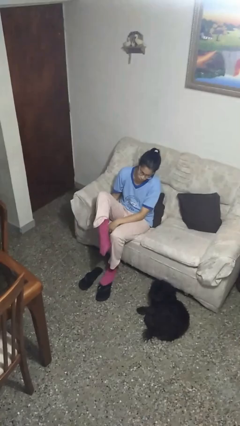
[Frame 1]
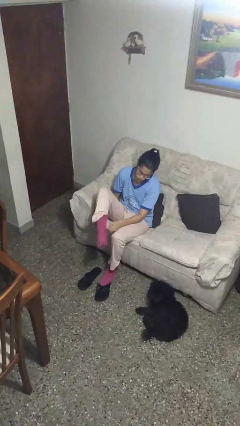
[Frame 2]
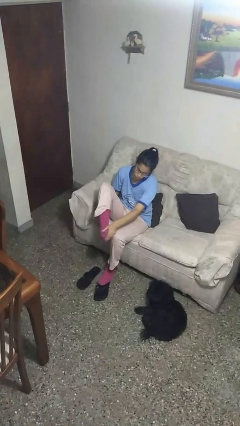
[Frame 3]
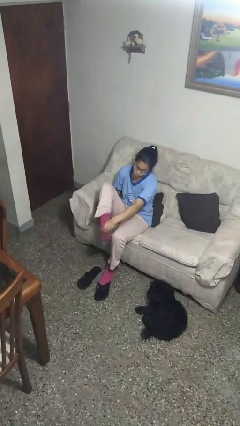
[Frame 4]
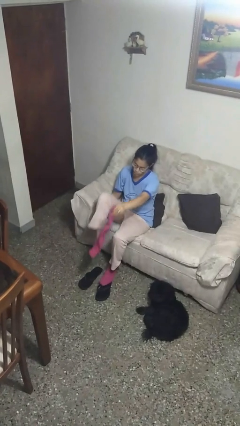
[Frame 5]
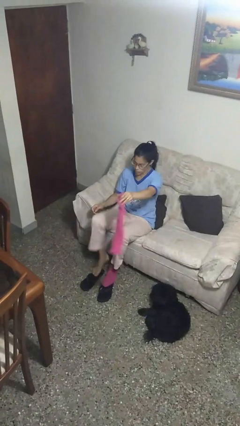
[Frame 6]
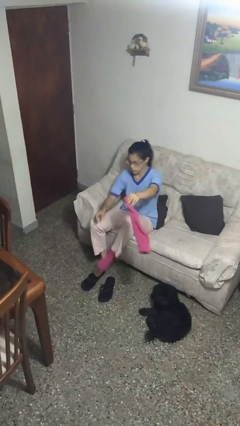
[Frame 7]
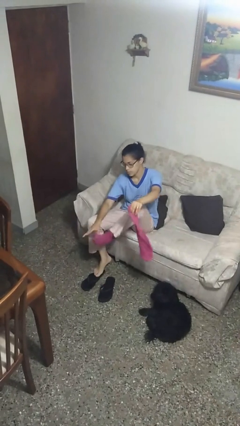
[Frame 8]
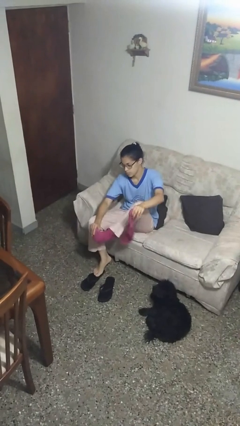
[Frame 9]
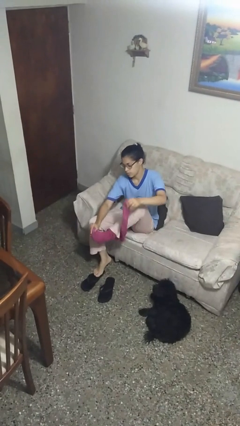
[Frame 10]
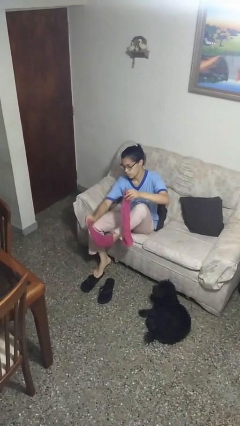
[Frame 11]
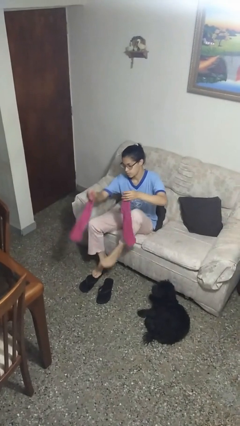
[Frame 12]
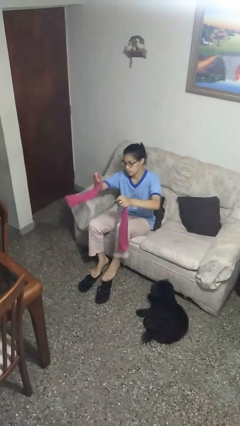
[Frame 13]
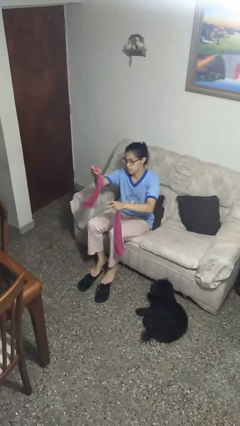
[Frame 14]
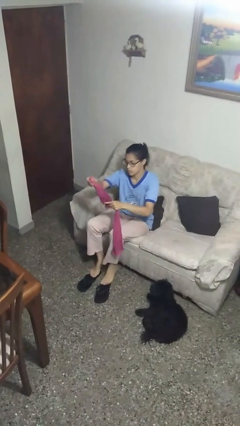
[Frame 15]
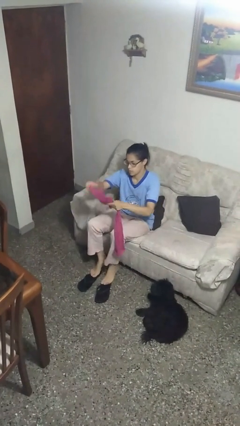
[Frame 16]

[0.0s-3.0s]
person takes off socks

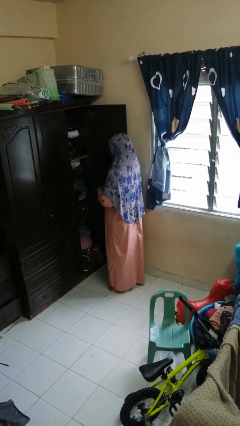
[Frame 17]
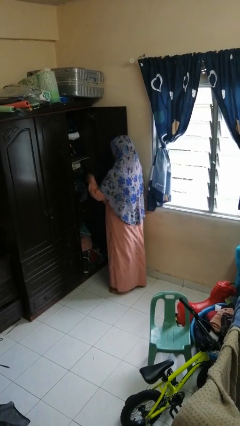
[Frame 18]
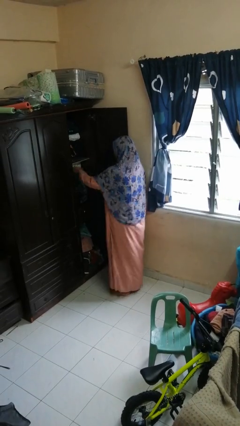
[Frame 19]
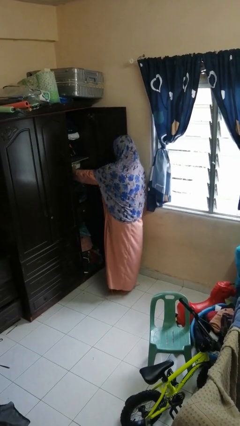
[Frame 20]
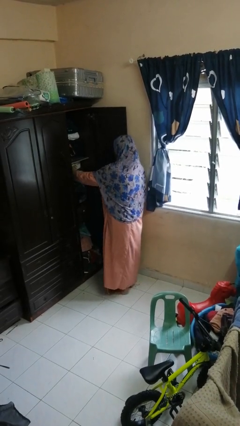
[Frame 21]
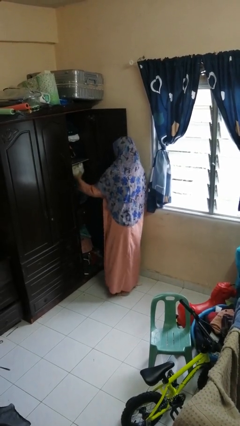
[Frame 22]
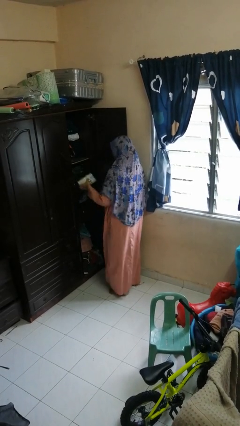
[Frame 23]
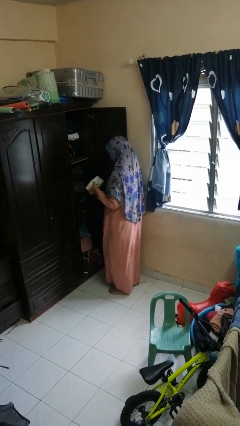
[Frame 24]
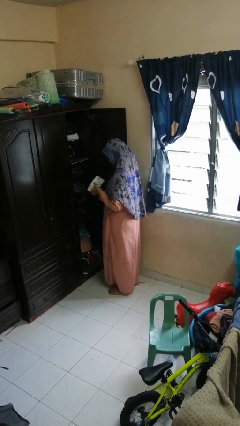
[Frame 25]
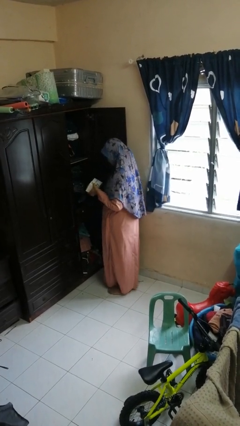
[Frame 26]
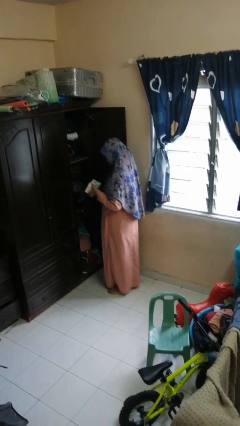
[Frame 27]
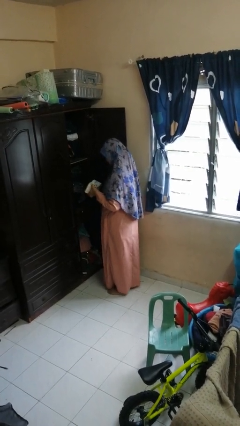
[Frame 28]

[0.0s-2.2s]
person picks up object from cabinet

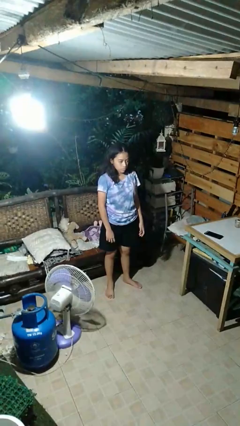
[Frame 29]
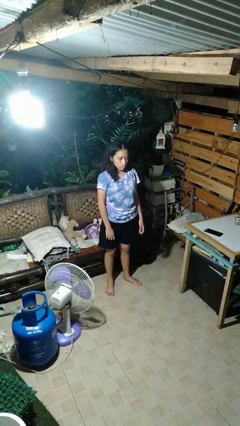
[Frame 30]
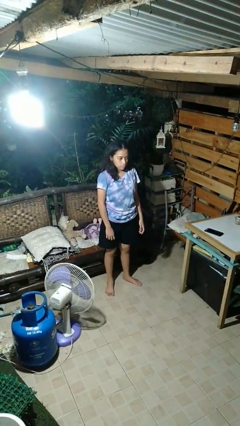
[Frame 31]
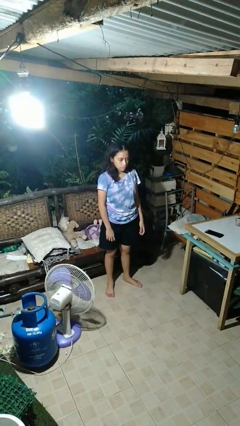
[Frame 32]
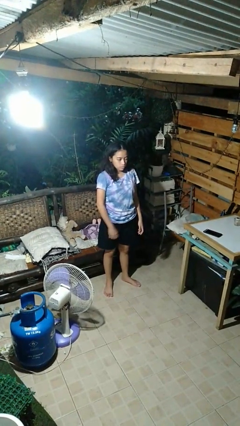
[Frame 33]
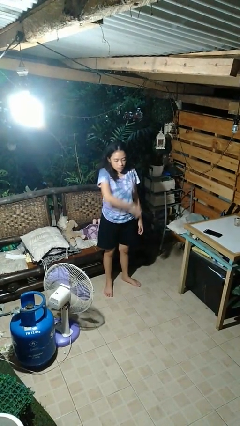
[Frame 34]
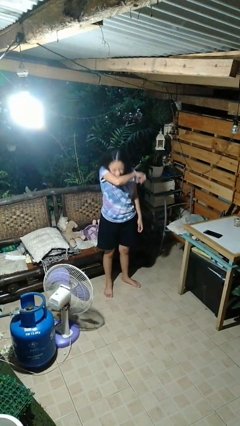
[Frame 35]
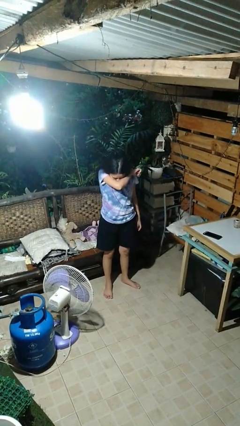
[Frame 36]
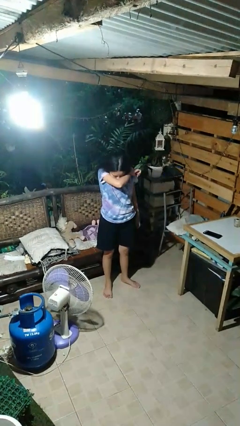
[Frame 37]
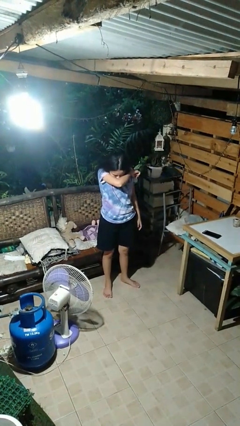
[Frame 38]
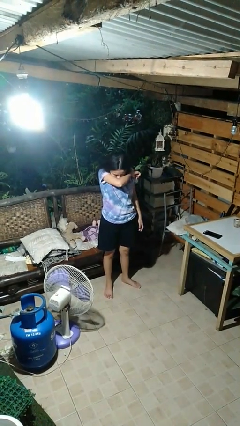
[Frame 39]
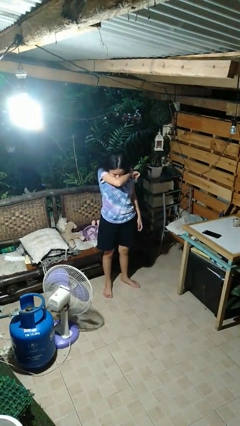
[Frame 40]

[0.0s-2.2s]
person sneezes into arm

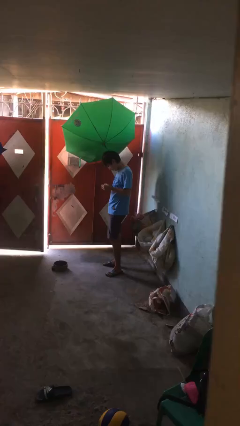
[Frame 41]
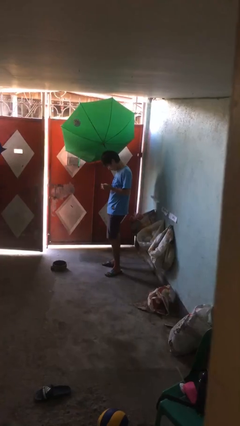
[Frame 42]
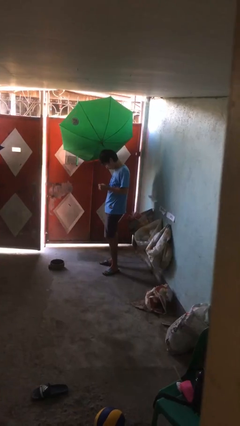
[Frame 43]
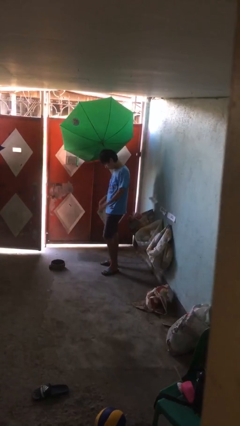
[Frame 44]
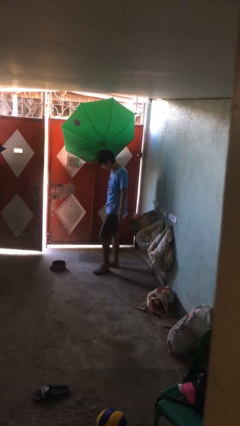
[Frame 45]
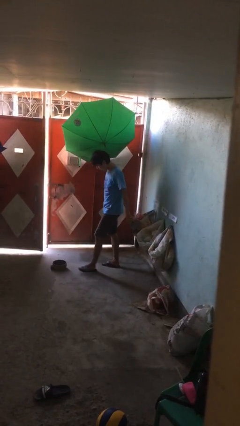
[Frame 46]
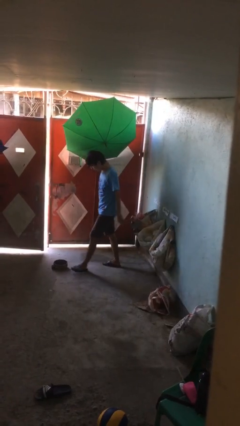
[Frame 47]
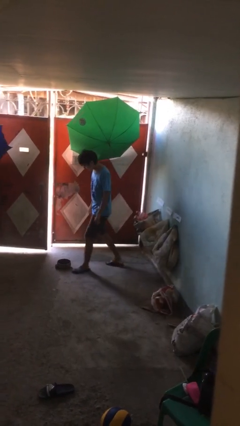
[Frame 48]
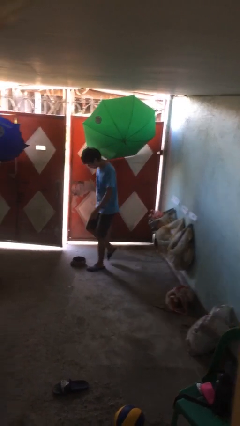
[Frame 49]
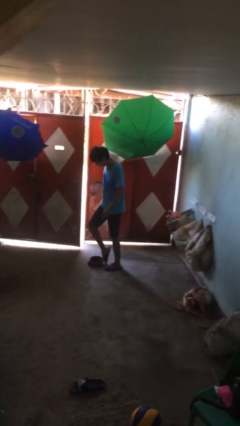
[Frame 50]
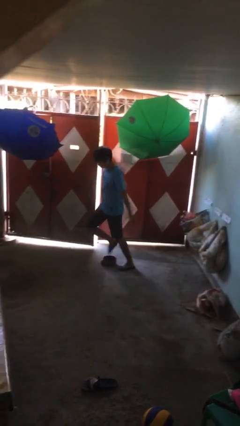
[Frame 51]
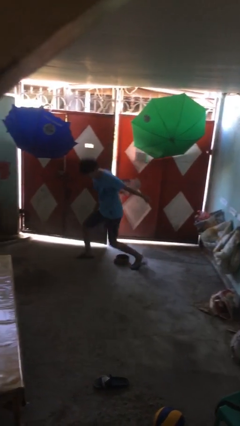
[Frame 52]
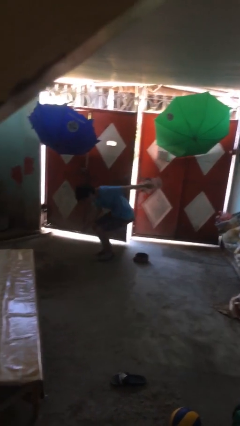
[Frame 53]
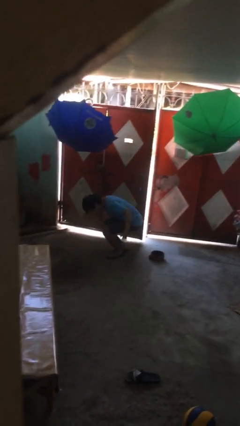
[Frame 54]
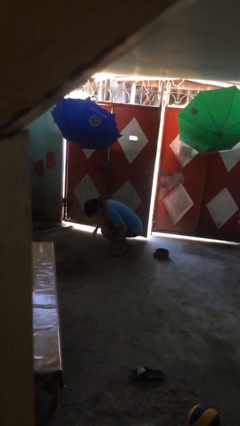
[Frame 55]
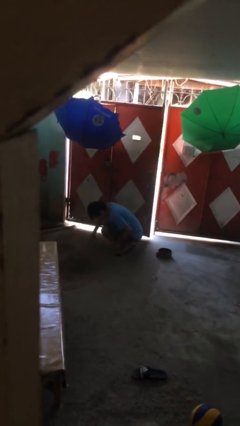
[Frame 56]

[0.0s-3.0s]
person trips on object on floor

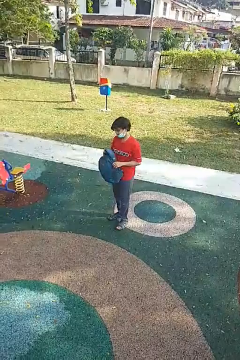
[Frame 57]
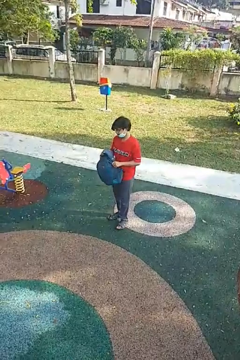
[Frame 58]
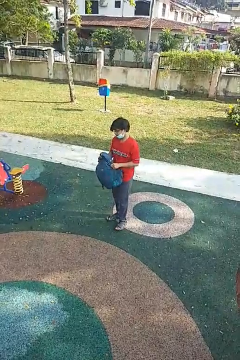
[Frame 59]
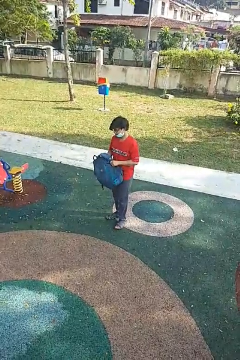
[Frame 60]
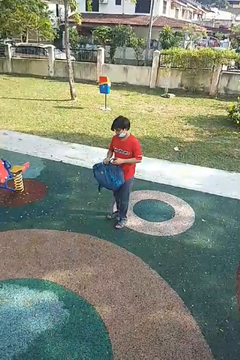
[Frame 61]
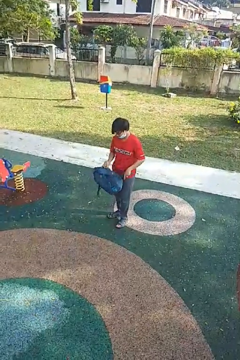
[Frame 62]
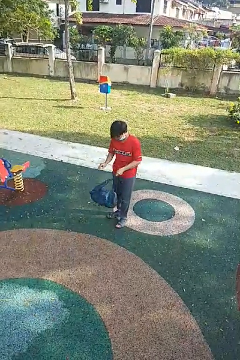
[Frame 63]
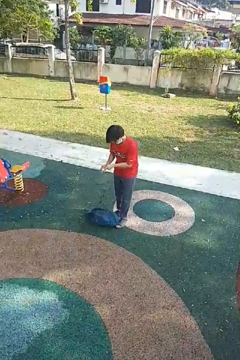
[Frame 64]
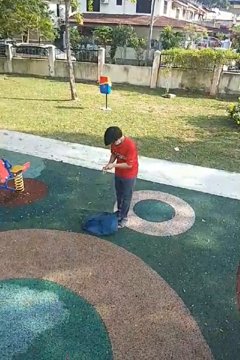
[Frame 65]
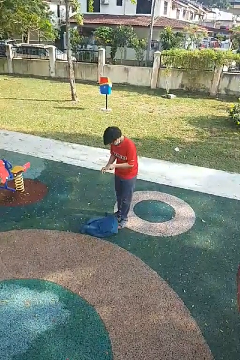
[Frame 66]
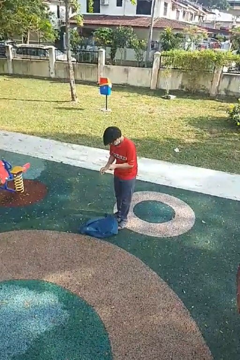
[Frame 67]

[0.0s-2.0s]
person drops object

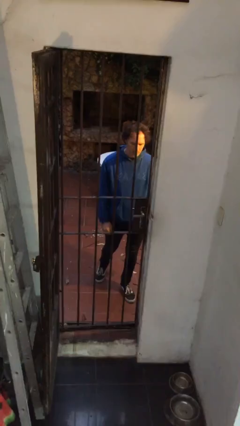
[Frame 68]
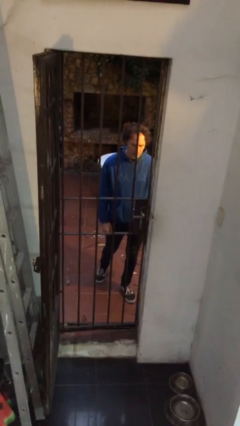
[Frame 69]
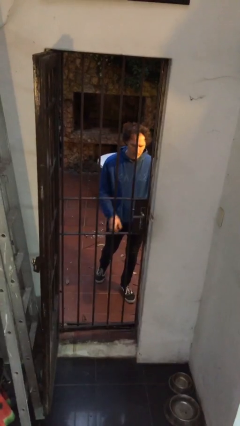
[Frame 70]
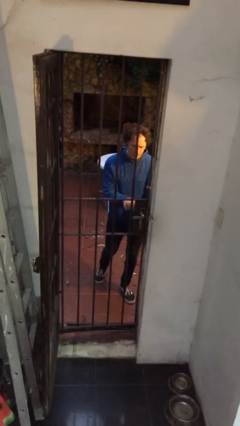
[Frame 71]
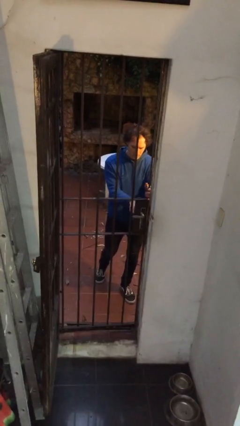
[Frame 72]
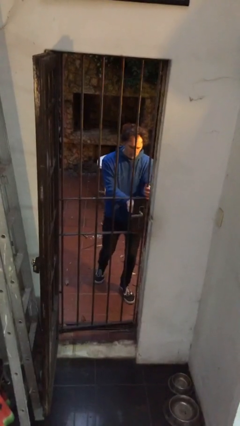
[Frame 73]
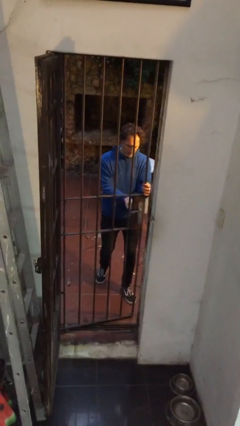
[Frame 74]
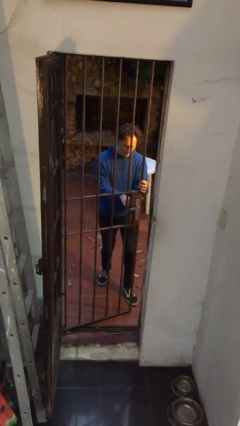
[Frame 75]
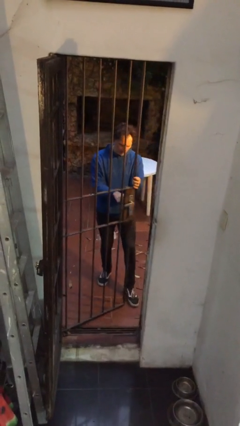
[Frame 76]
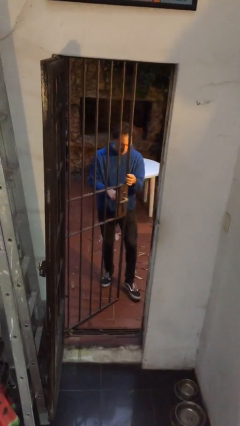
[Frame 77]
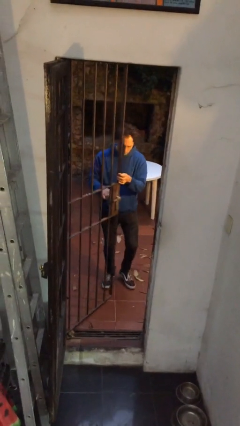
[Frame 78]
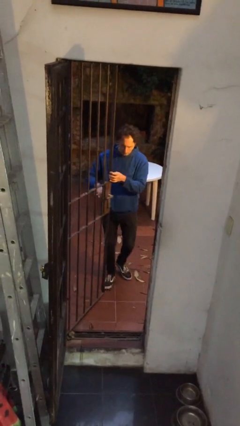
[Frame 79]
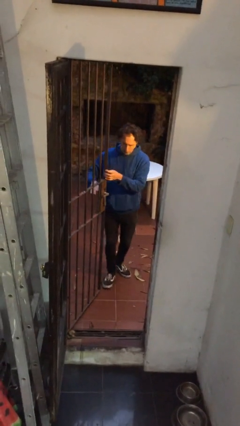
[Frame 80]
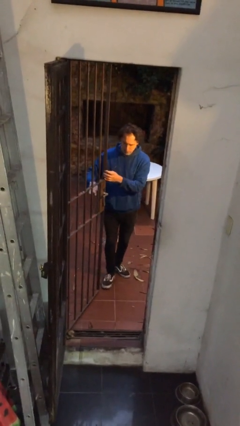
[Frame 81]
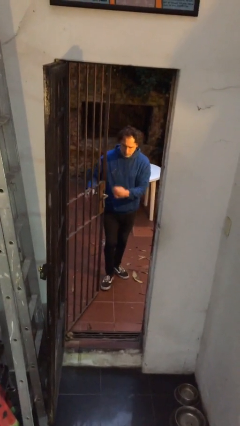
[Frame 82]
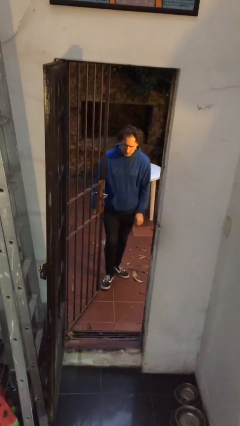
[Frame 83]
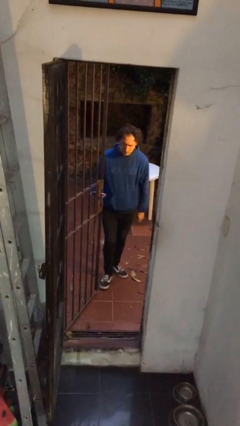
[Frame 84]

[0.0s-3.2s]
person opens gate

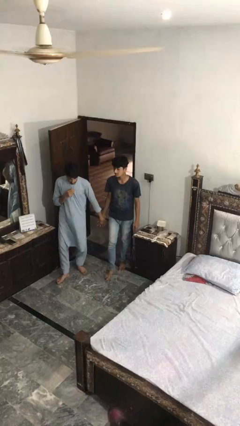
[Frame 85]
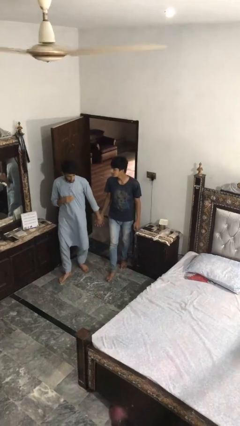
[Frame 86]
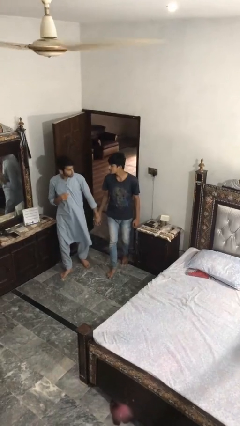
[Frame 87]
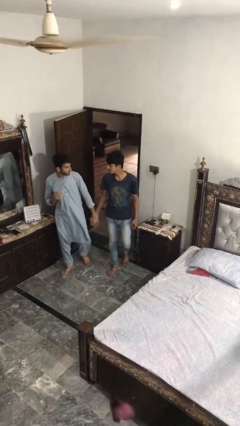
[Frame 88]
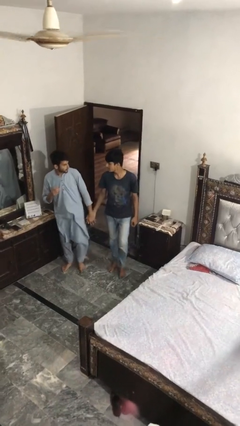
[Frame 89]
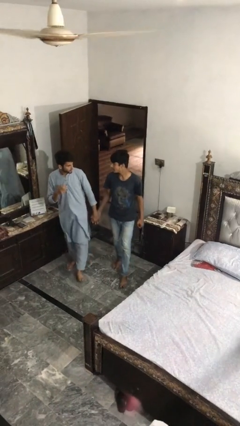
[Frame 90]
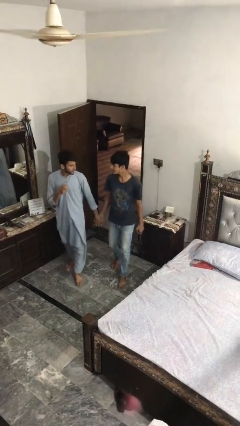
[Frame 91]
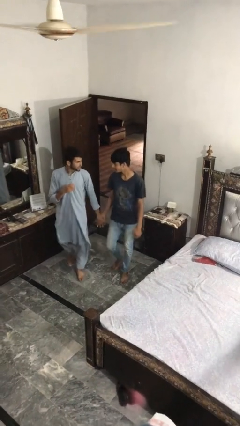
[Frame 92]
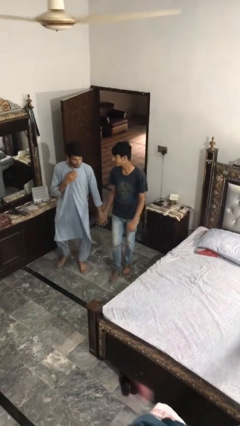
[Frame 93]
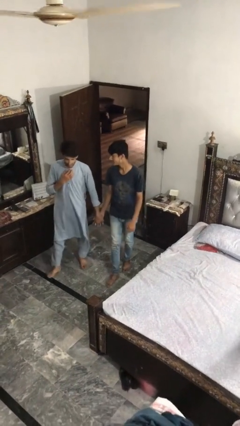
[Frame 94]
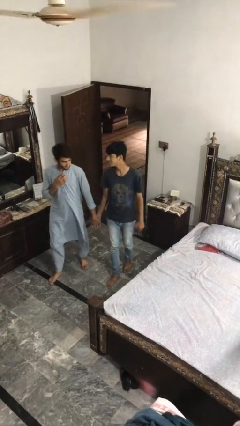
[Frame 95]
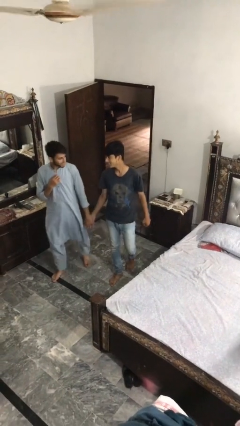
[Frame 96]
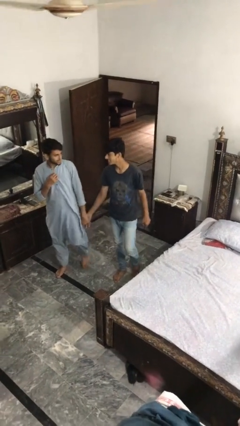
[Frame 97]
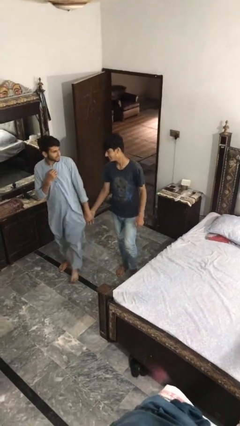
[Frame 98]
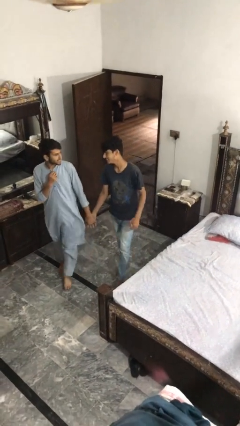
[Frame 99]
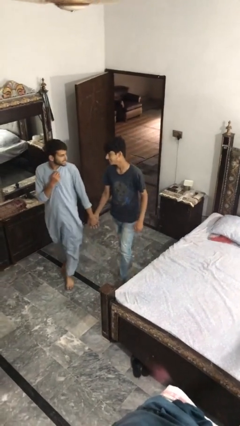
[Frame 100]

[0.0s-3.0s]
person holds hand
